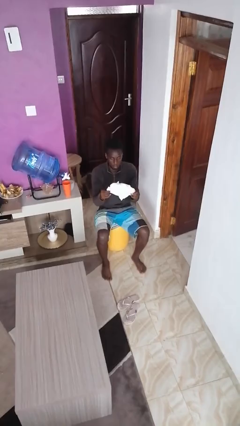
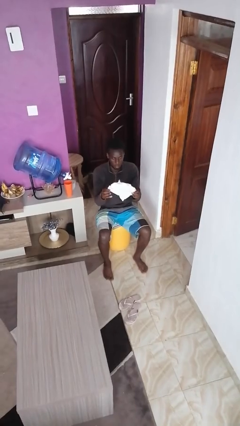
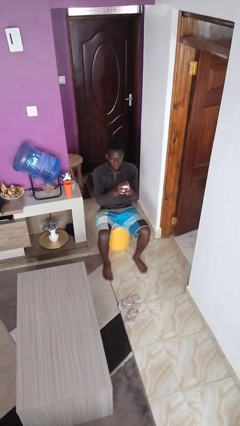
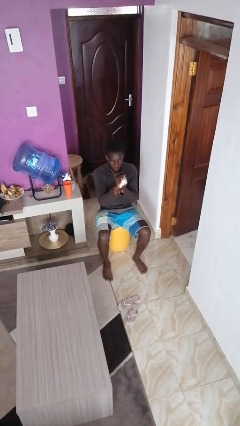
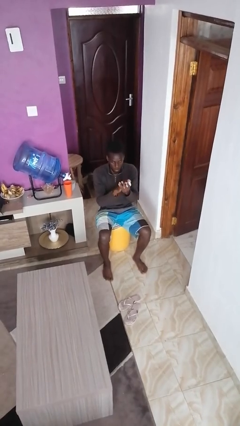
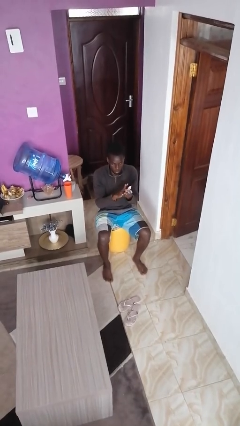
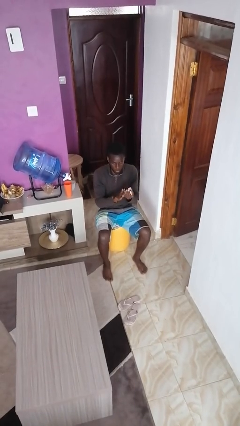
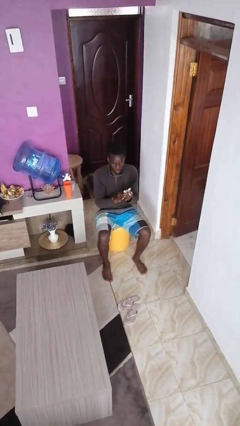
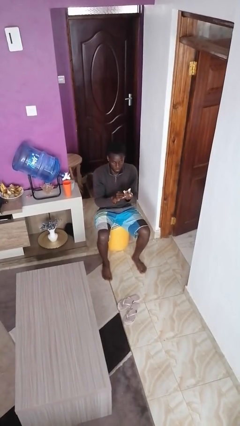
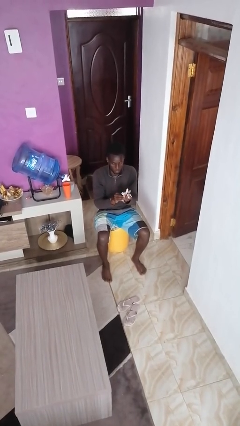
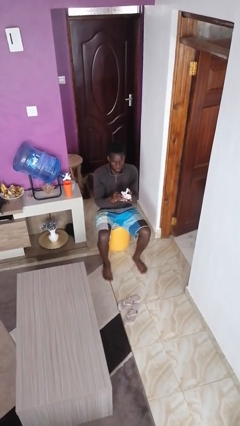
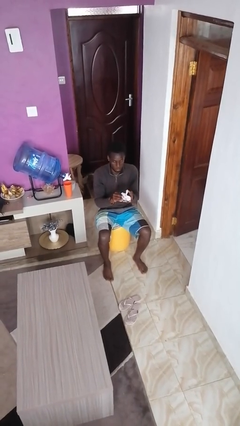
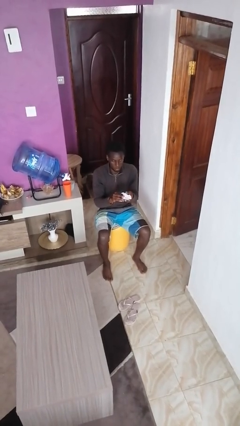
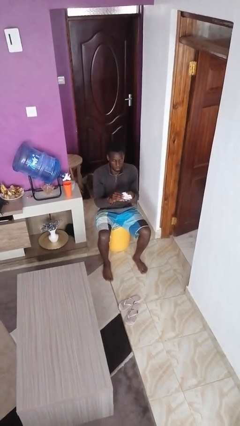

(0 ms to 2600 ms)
person crumples paper

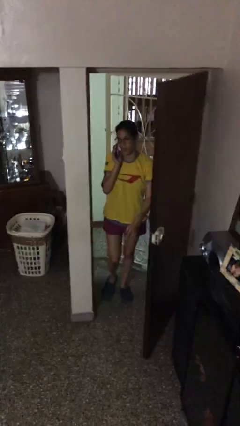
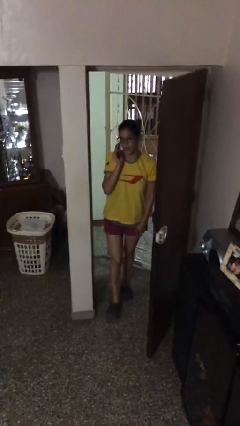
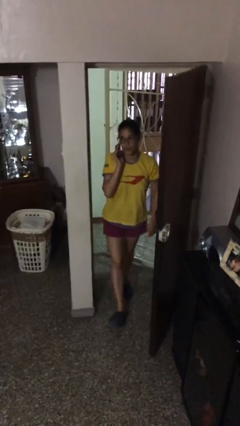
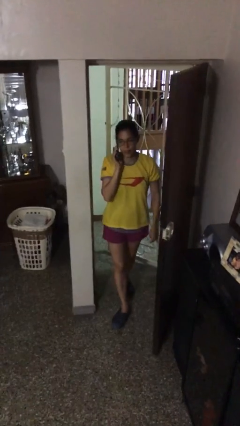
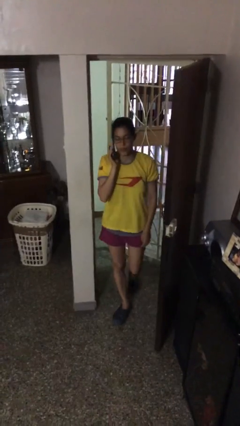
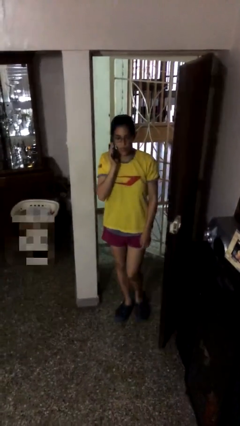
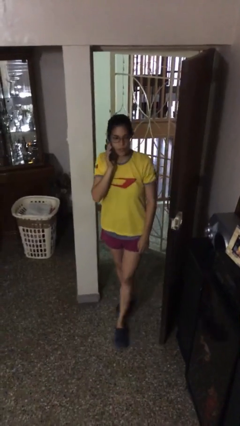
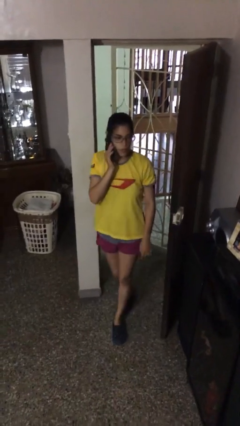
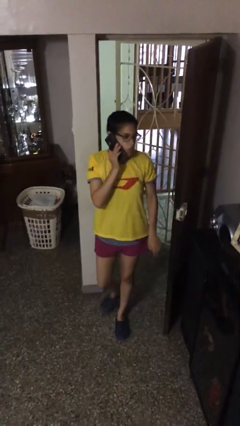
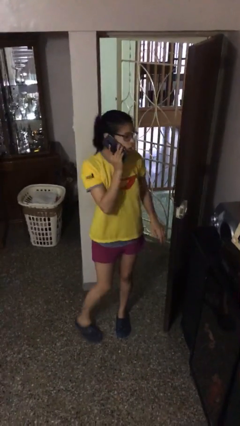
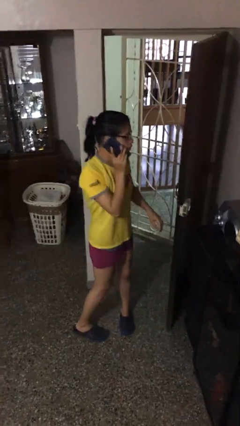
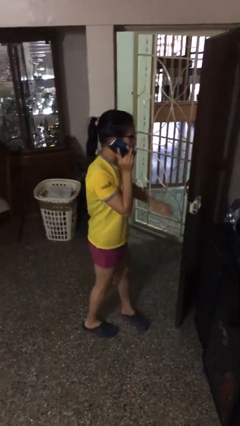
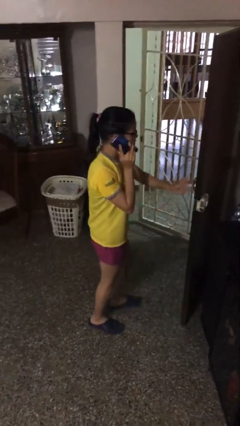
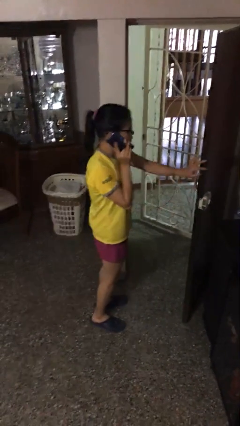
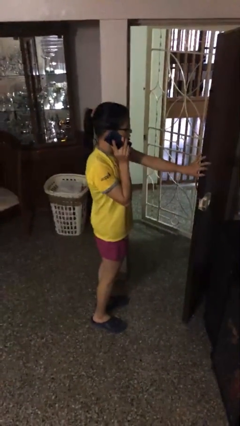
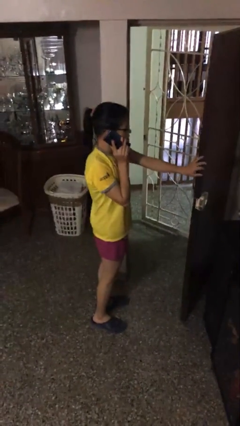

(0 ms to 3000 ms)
person enters scene through structure

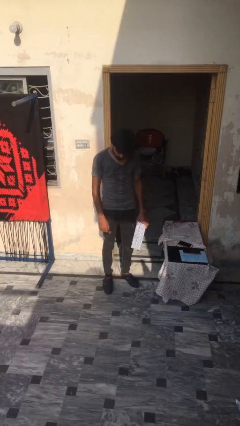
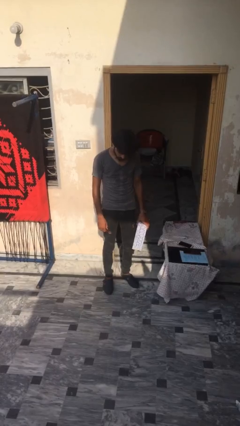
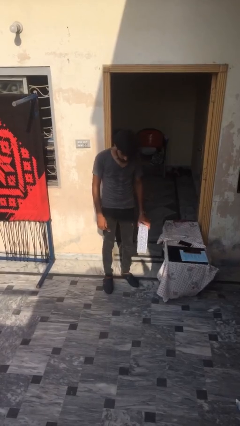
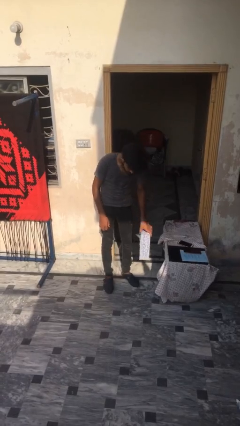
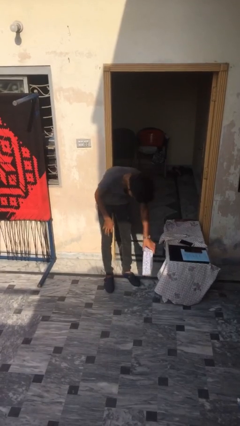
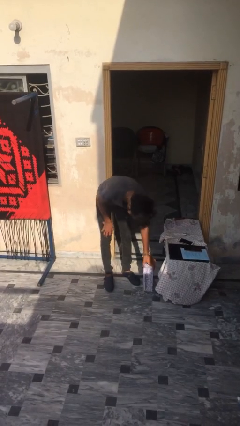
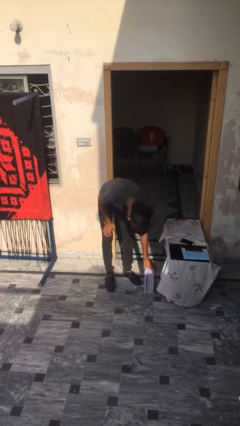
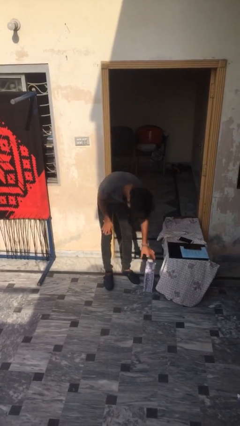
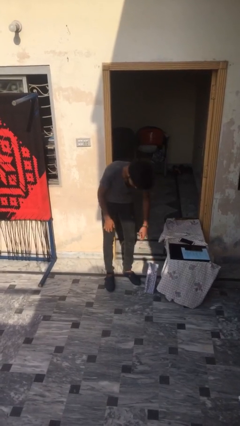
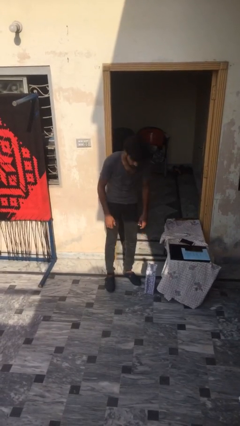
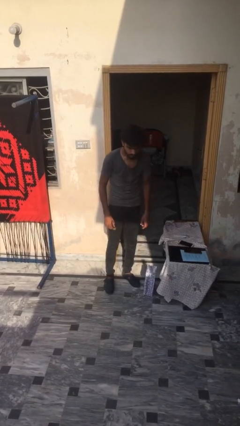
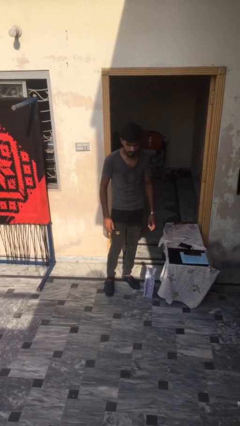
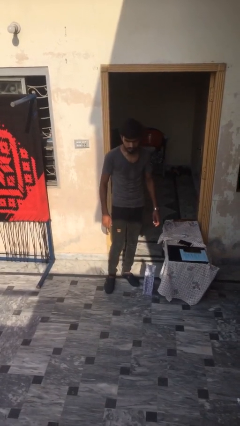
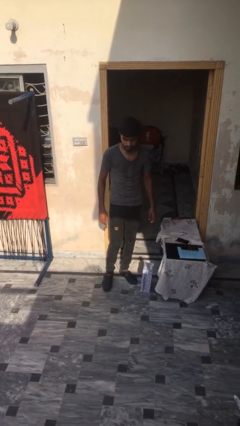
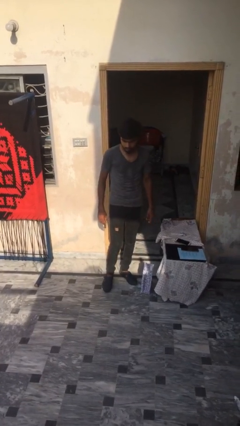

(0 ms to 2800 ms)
person puts down object on floor

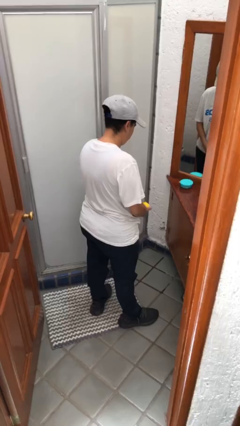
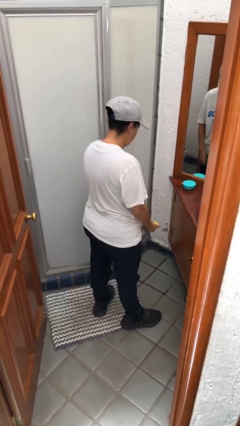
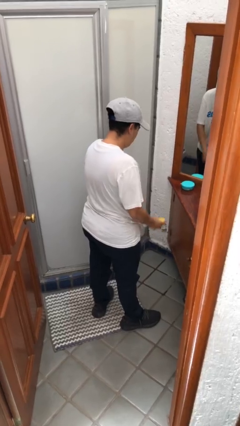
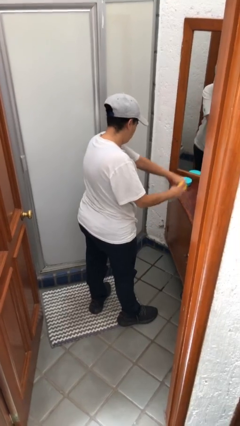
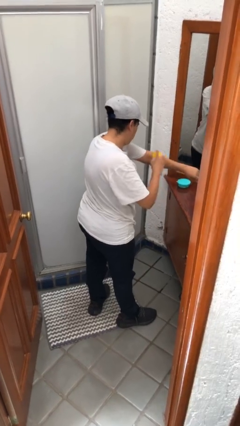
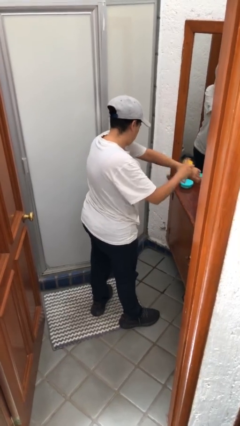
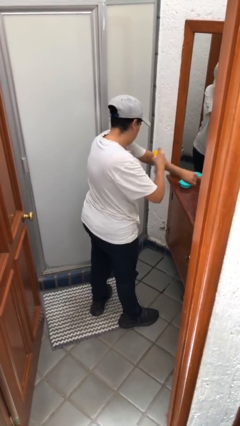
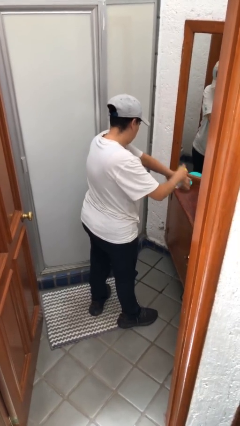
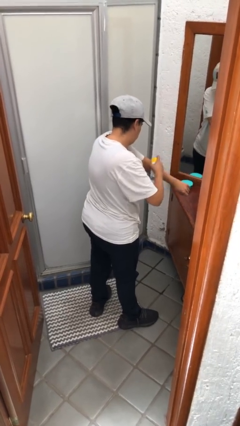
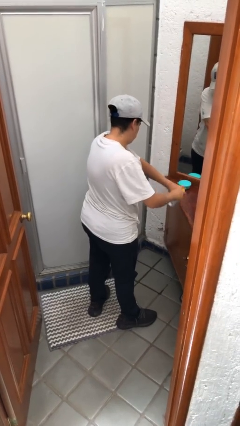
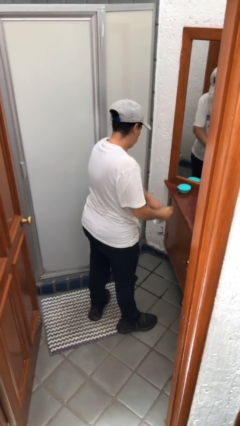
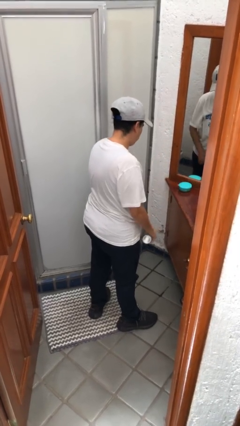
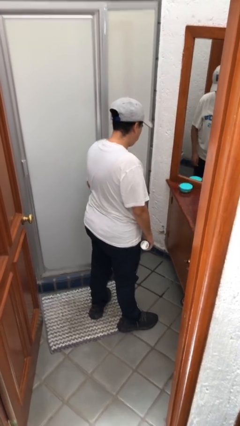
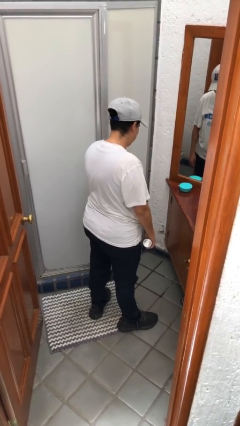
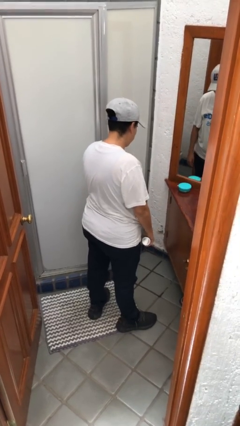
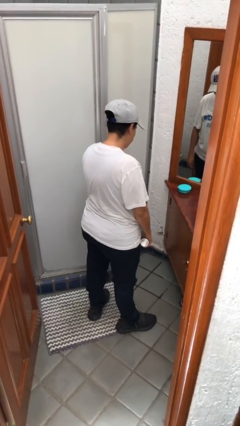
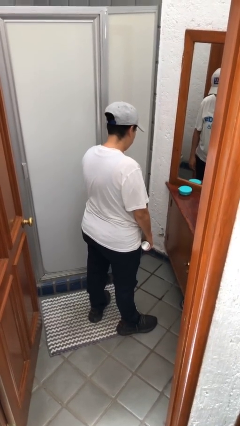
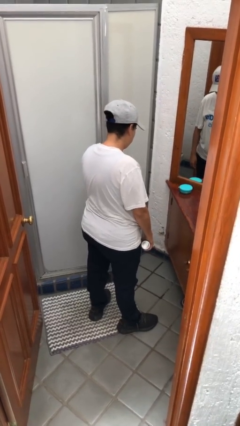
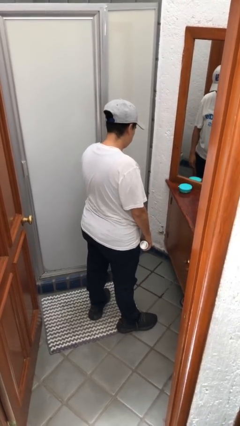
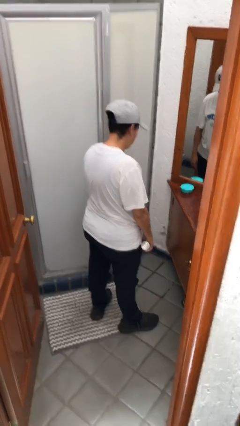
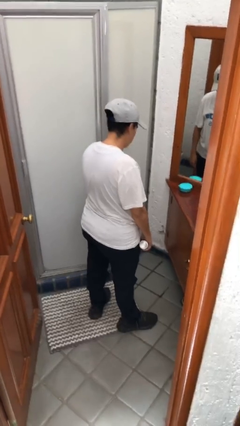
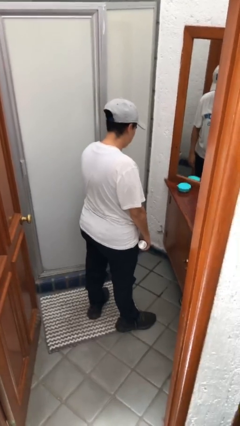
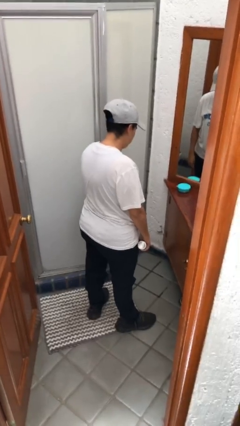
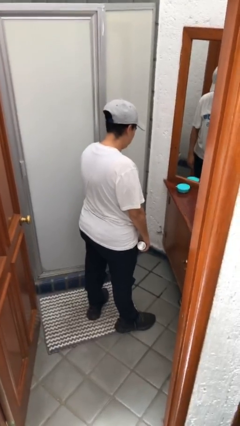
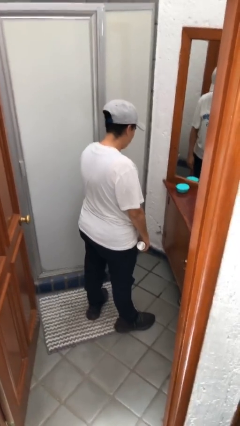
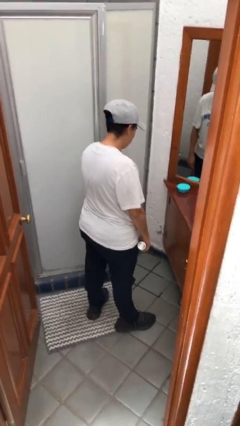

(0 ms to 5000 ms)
person applies sunscreen

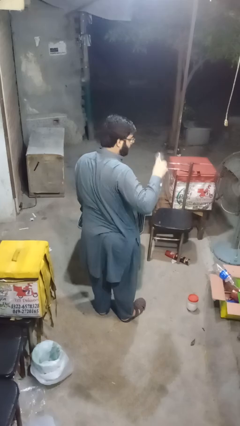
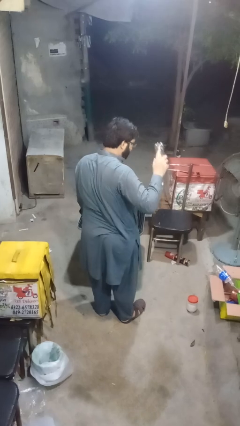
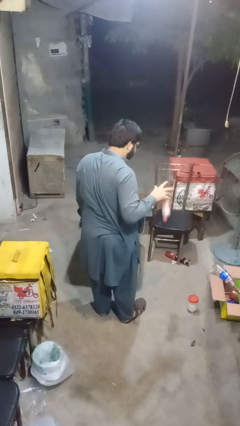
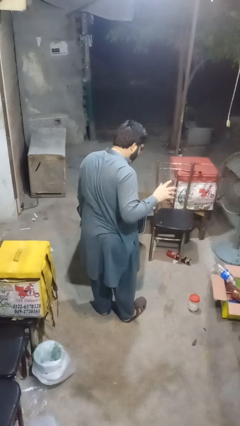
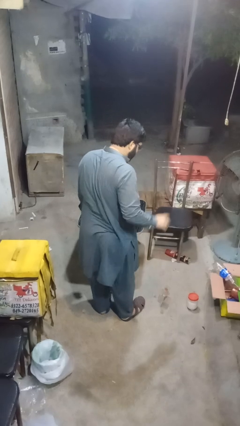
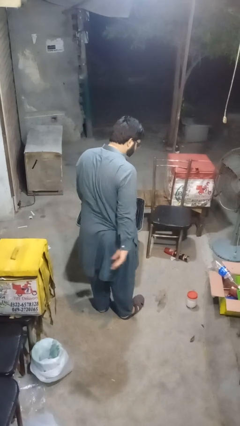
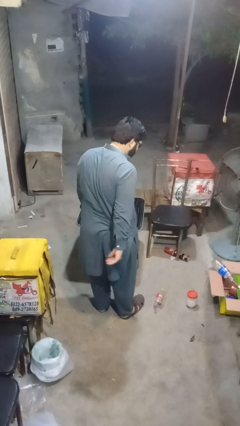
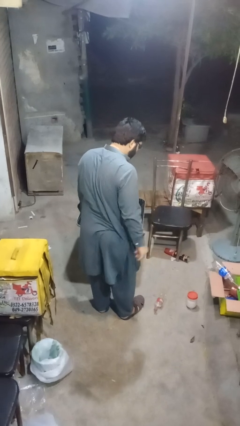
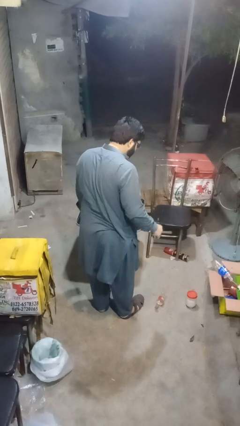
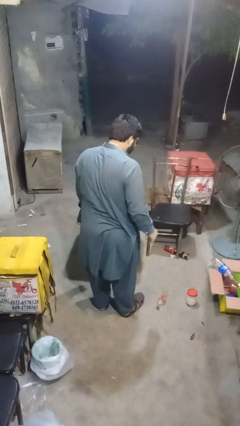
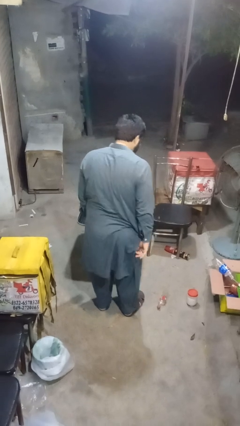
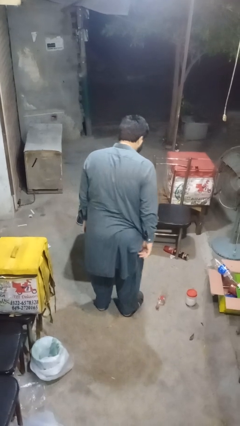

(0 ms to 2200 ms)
person throws object to ground

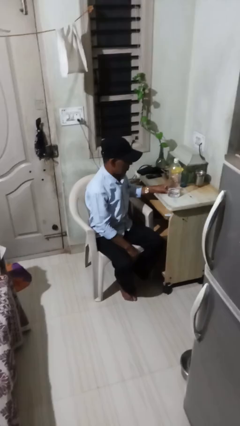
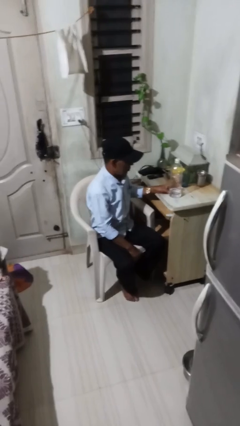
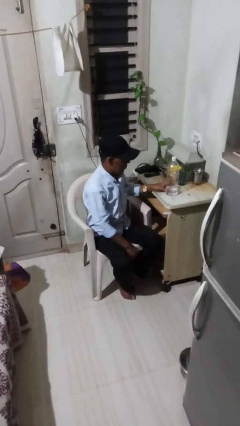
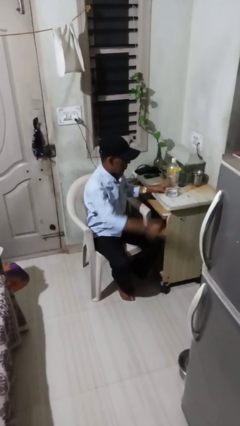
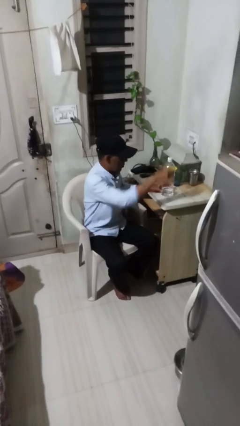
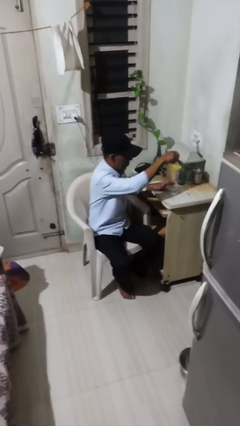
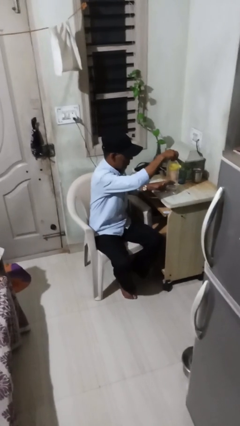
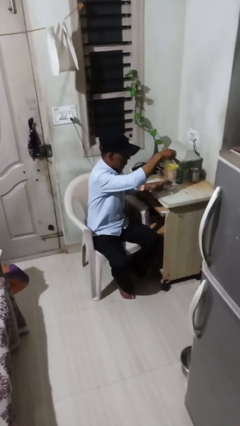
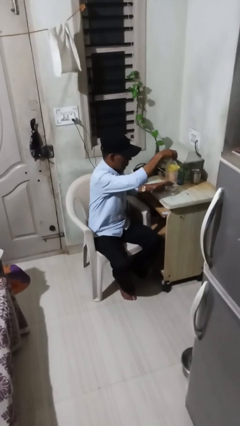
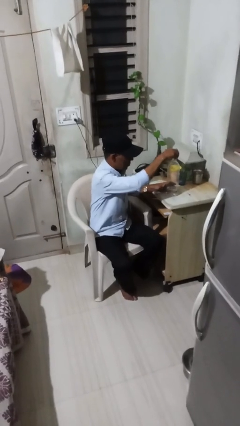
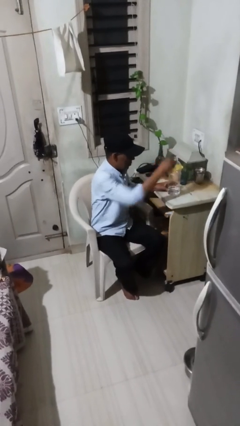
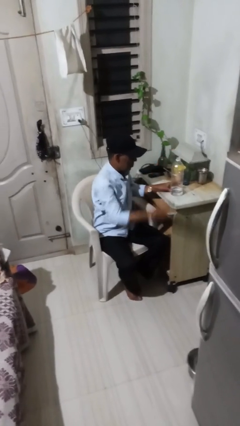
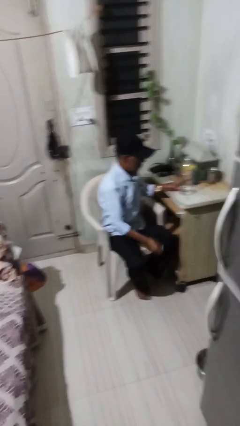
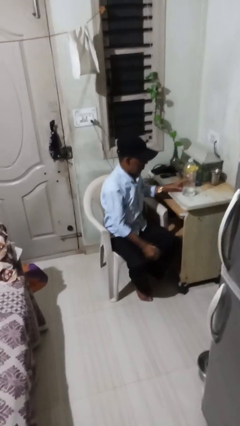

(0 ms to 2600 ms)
person unscrews lid from bottle
